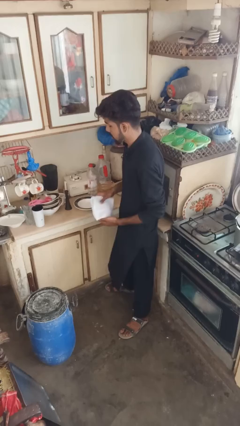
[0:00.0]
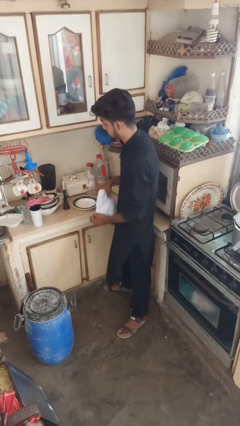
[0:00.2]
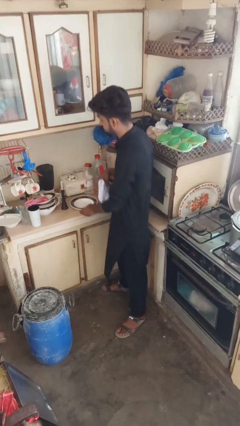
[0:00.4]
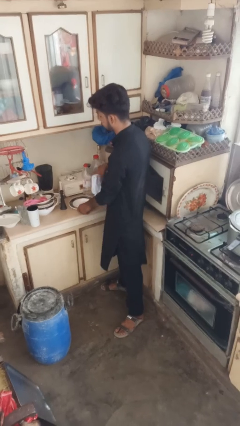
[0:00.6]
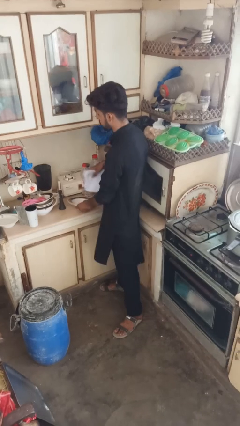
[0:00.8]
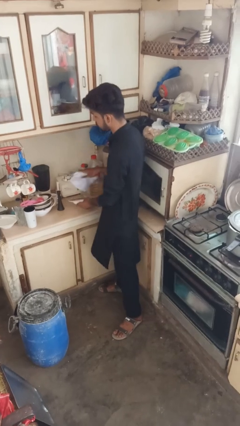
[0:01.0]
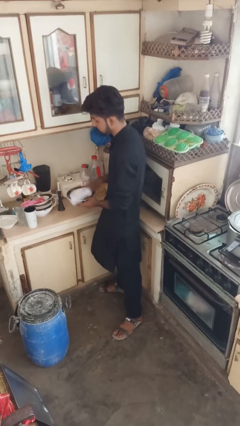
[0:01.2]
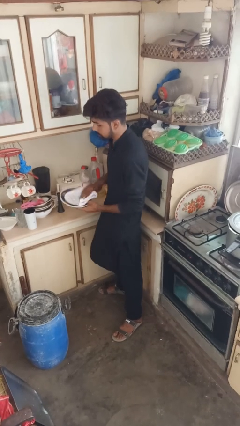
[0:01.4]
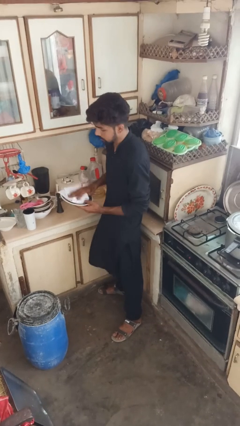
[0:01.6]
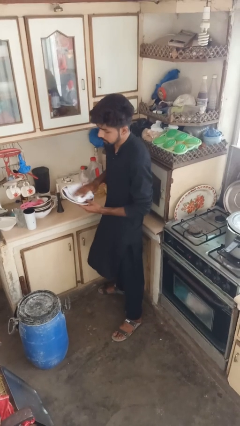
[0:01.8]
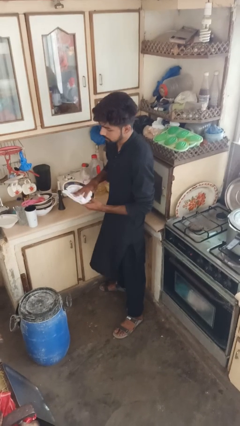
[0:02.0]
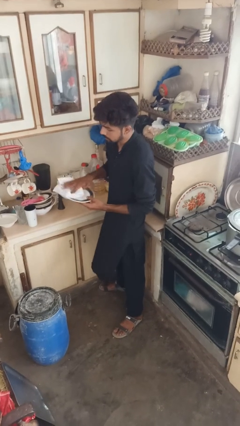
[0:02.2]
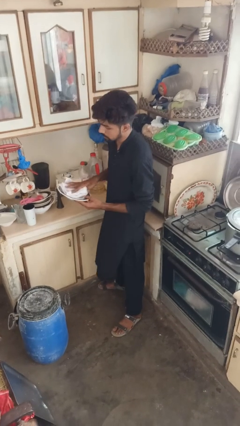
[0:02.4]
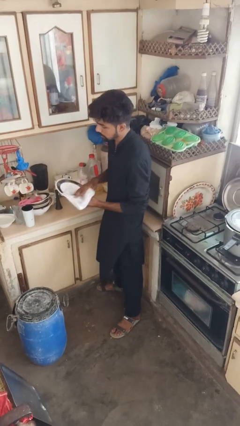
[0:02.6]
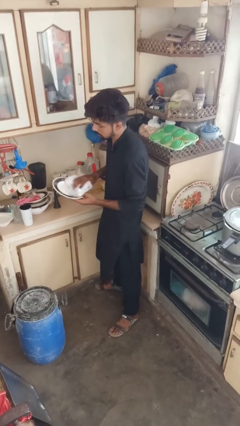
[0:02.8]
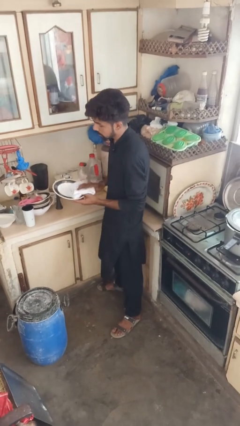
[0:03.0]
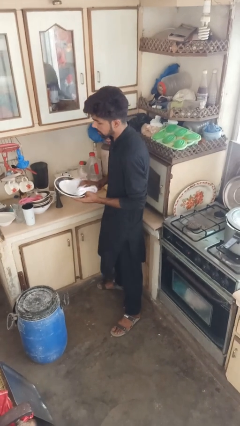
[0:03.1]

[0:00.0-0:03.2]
person dries dish

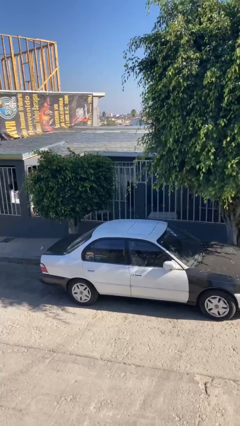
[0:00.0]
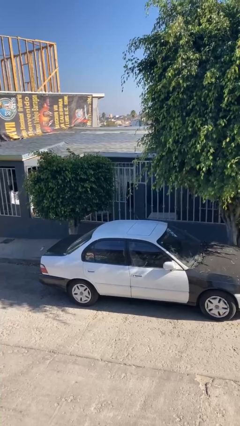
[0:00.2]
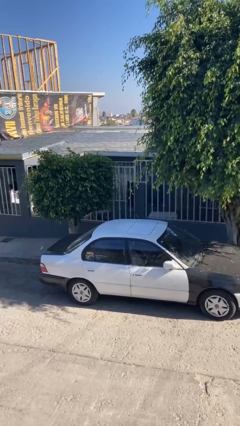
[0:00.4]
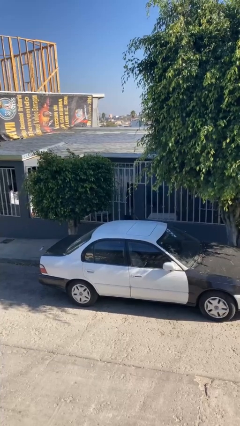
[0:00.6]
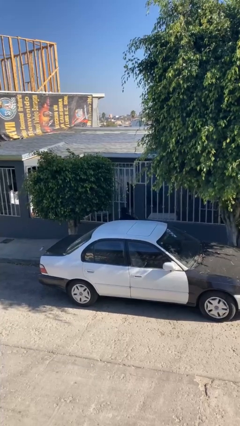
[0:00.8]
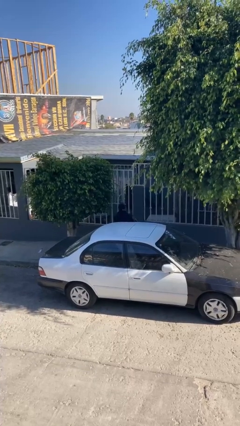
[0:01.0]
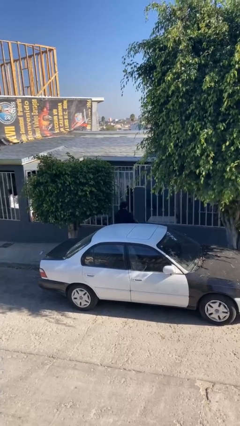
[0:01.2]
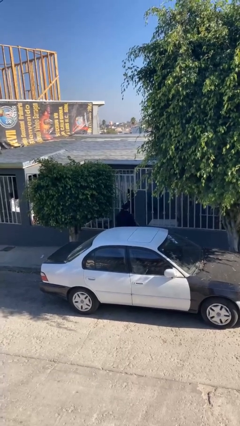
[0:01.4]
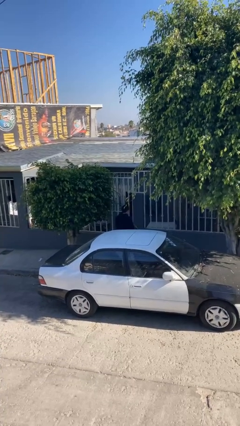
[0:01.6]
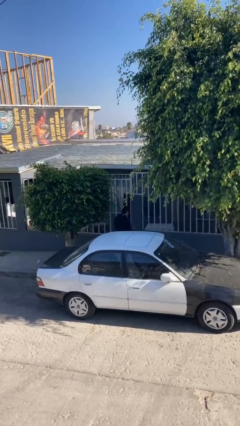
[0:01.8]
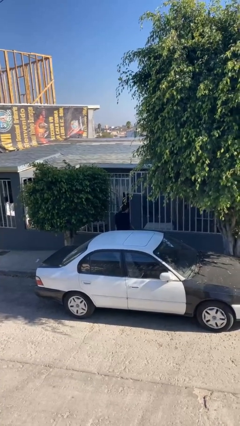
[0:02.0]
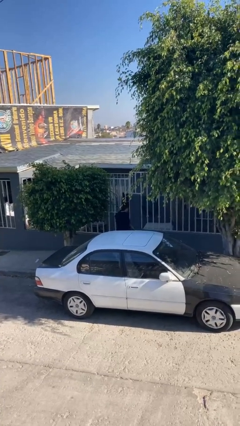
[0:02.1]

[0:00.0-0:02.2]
person exits car

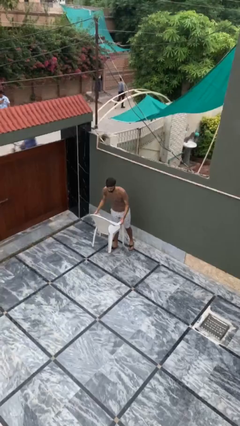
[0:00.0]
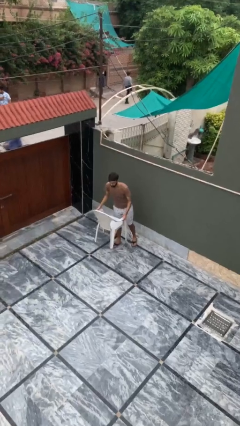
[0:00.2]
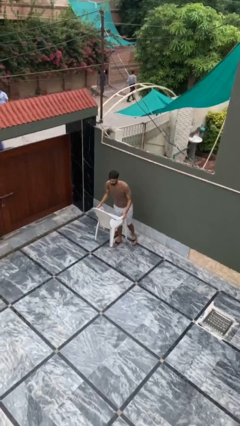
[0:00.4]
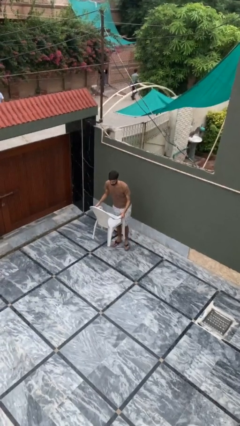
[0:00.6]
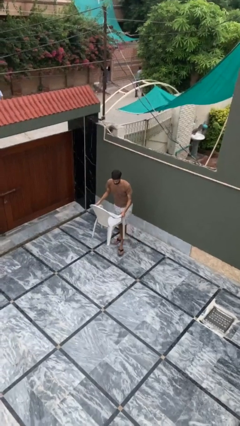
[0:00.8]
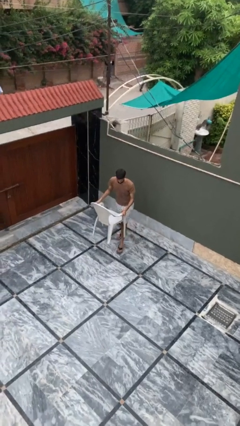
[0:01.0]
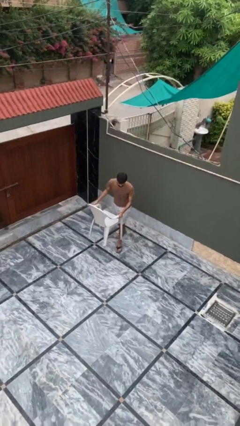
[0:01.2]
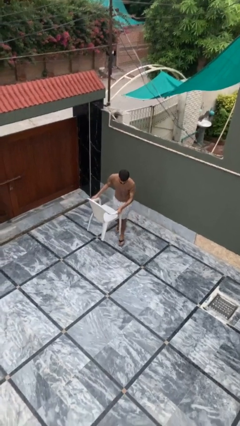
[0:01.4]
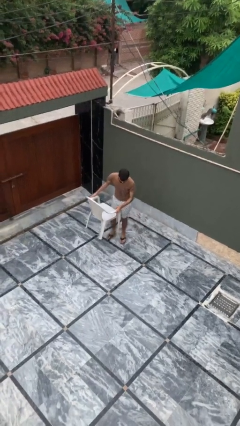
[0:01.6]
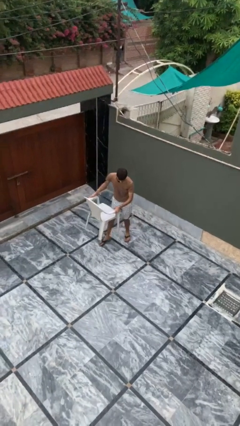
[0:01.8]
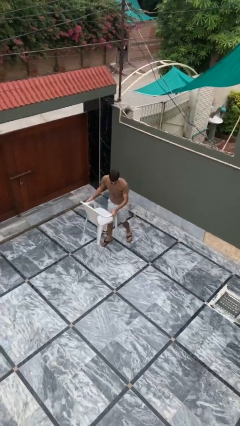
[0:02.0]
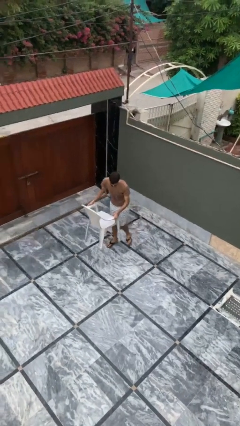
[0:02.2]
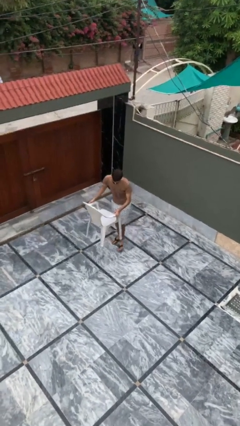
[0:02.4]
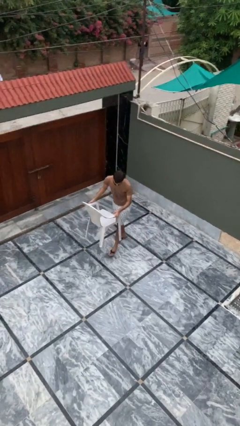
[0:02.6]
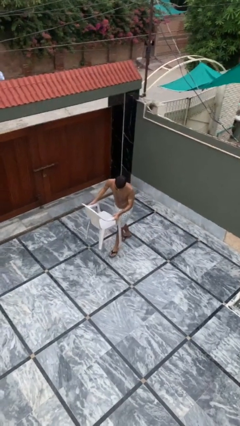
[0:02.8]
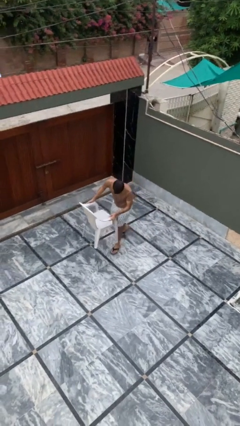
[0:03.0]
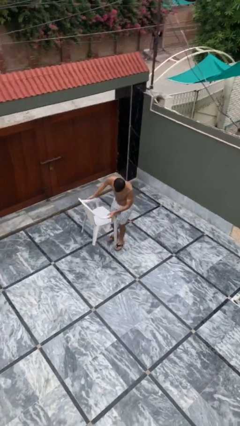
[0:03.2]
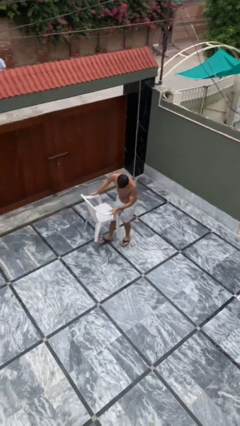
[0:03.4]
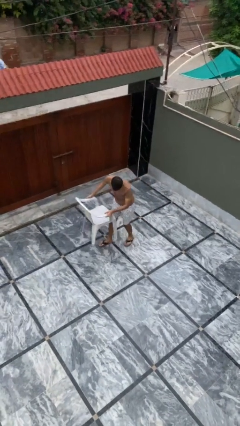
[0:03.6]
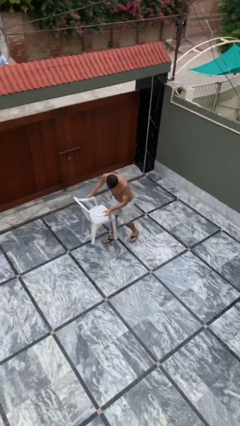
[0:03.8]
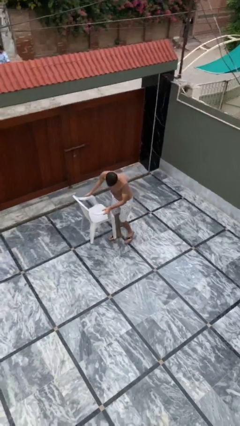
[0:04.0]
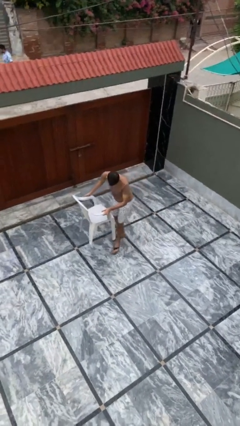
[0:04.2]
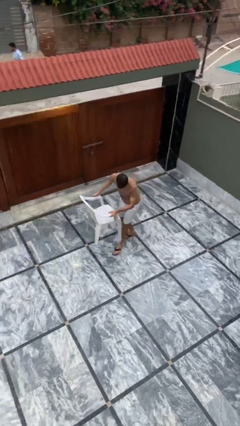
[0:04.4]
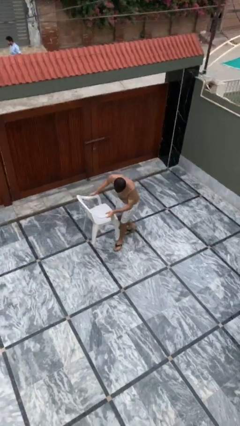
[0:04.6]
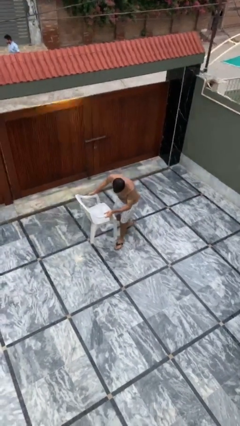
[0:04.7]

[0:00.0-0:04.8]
person carries heavy object

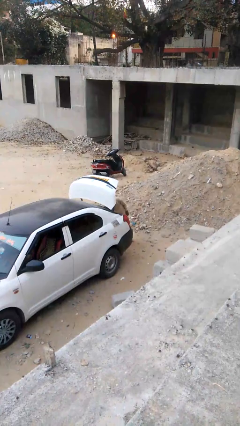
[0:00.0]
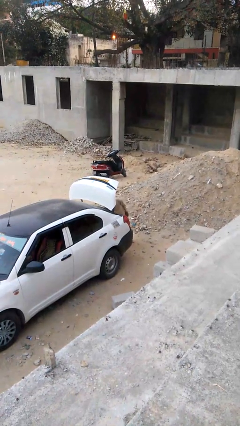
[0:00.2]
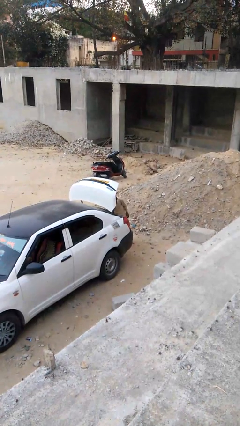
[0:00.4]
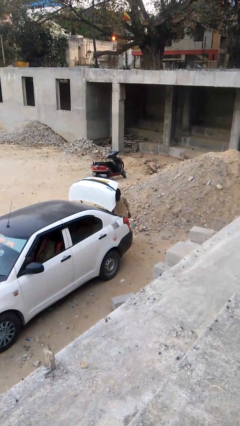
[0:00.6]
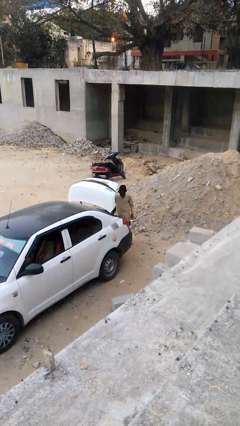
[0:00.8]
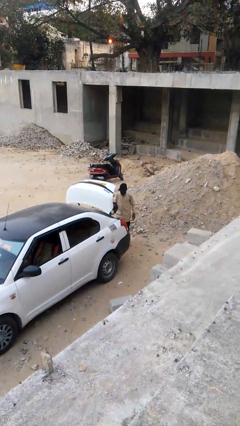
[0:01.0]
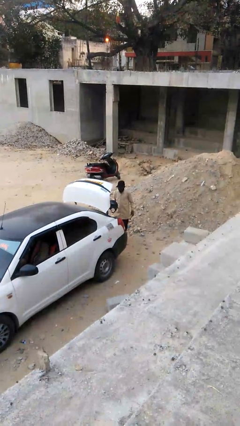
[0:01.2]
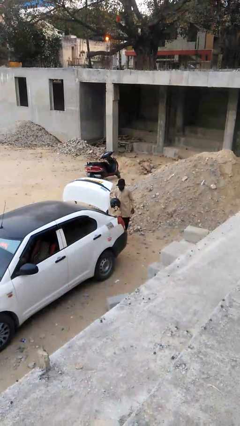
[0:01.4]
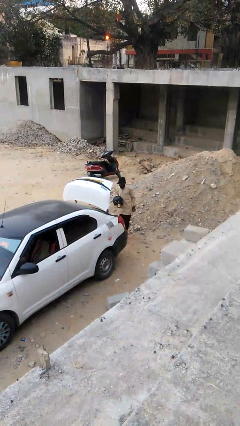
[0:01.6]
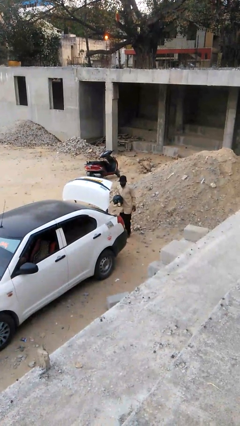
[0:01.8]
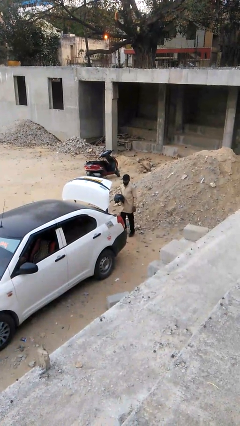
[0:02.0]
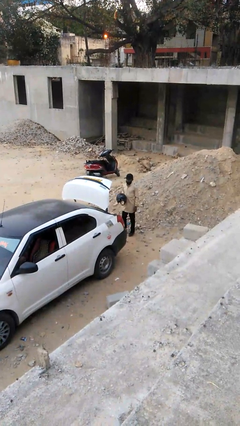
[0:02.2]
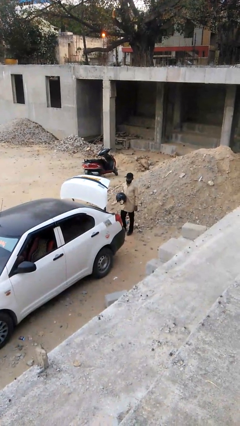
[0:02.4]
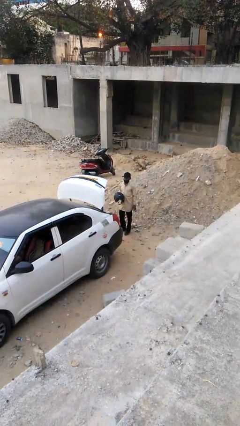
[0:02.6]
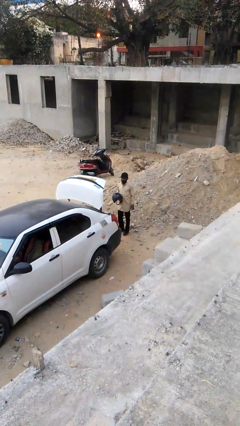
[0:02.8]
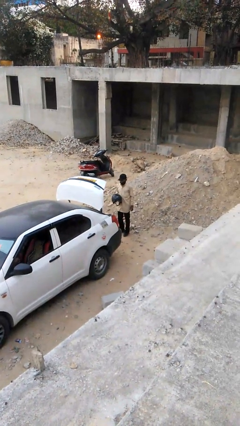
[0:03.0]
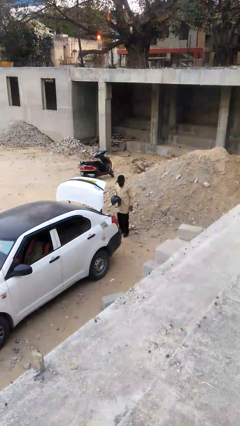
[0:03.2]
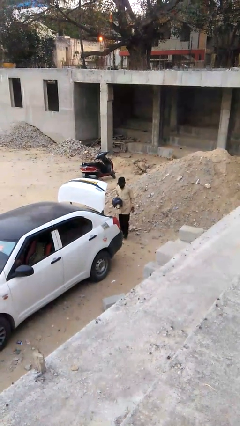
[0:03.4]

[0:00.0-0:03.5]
person unloads car

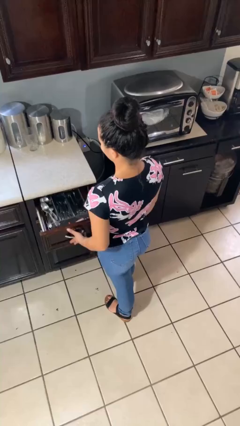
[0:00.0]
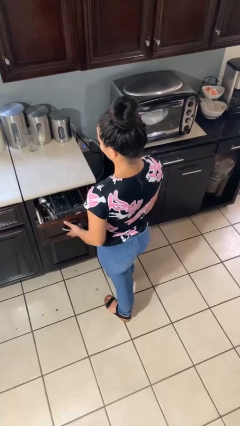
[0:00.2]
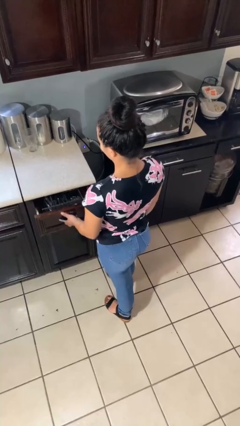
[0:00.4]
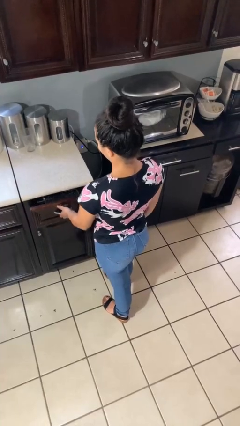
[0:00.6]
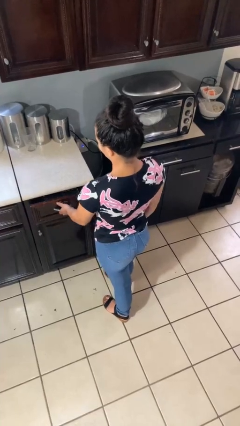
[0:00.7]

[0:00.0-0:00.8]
person closes kitchen drawer

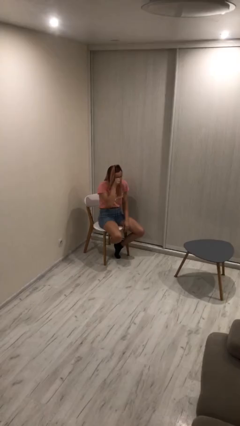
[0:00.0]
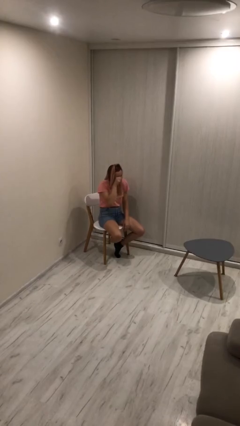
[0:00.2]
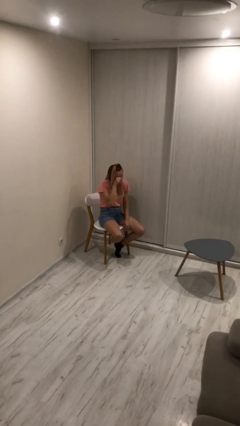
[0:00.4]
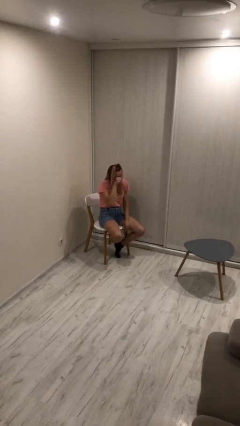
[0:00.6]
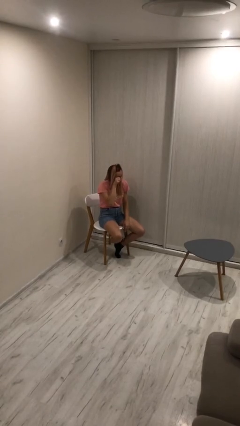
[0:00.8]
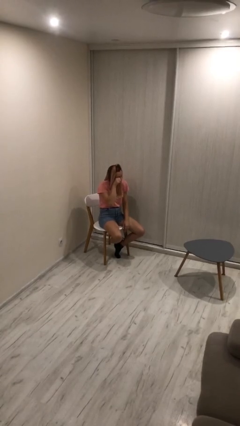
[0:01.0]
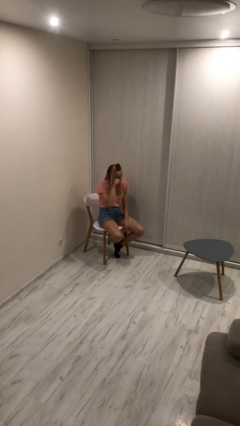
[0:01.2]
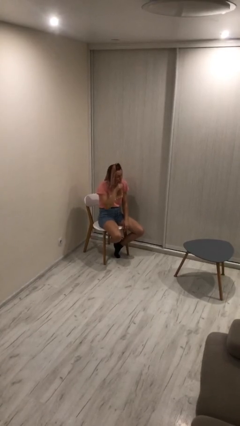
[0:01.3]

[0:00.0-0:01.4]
person rubs eyes

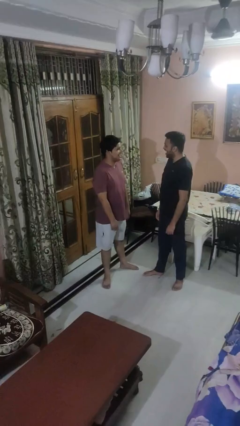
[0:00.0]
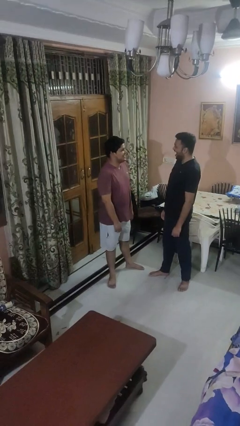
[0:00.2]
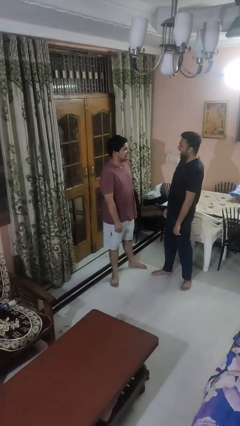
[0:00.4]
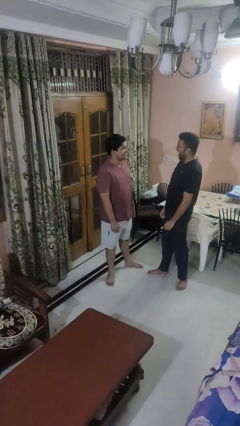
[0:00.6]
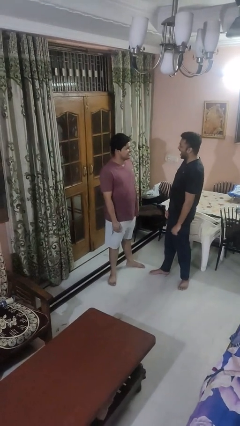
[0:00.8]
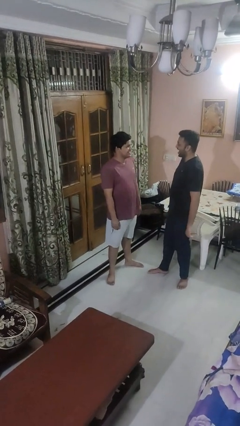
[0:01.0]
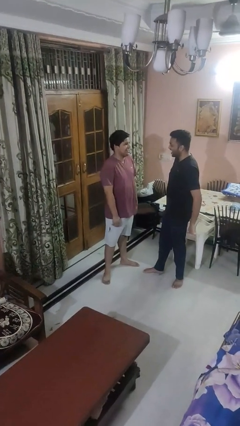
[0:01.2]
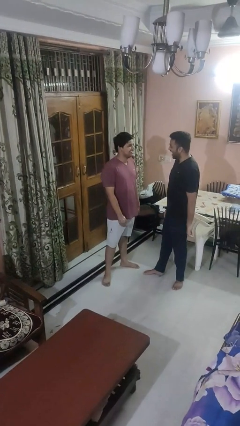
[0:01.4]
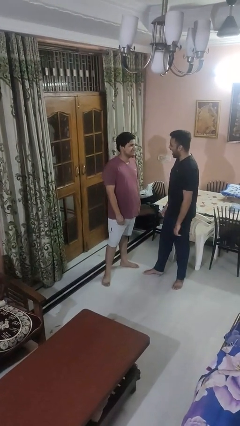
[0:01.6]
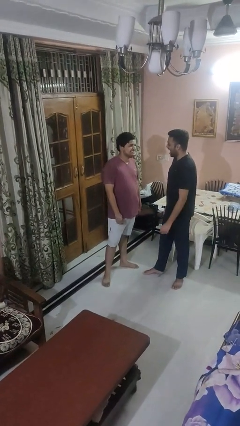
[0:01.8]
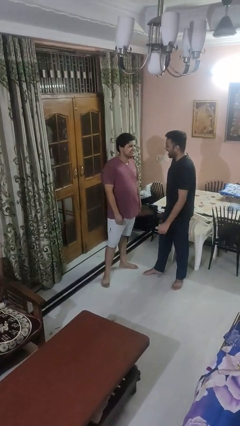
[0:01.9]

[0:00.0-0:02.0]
person laughs with person
